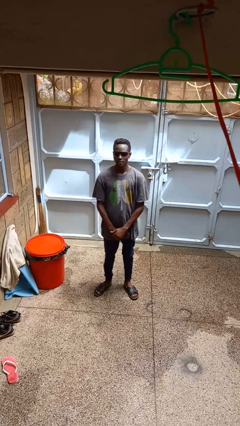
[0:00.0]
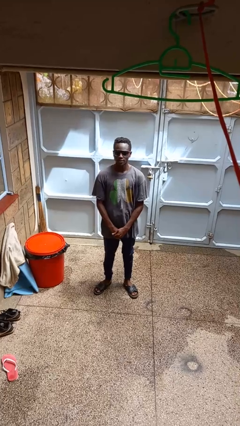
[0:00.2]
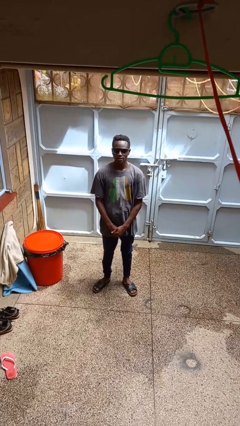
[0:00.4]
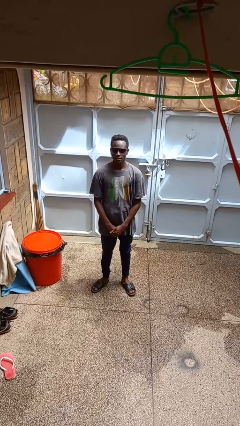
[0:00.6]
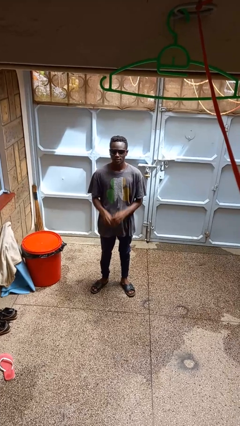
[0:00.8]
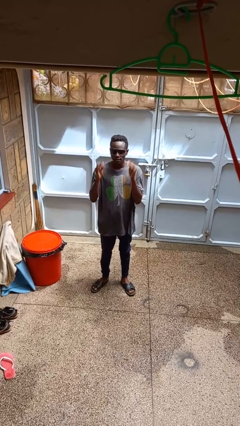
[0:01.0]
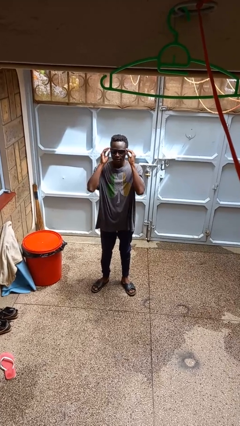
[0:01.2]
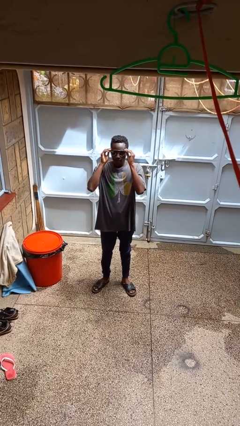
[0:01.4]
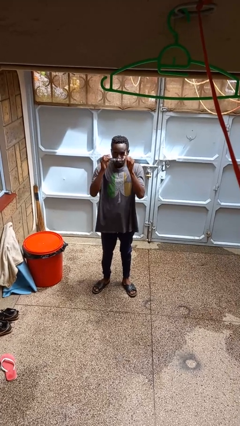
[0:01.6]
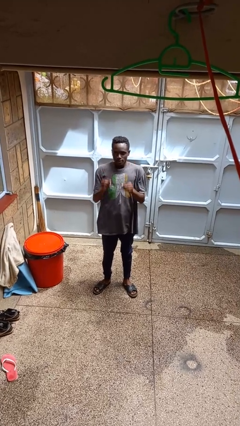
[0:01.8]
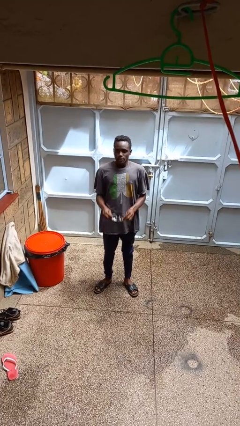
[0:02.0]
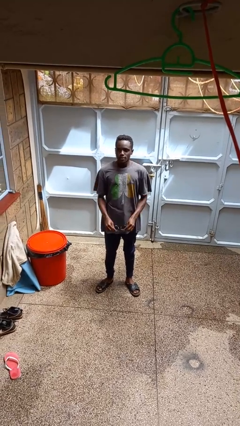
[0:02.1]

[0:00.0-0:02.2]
person takes off sunglasses

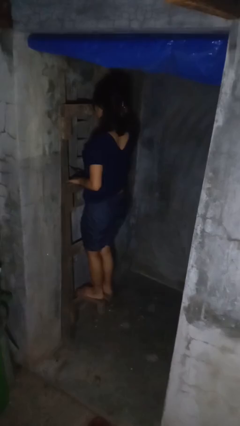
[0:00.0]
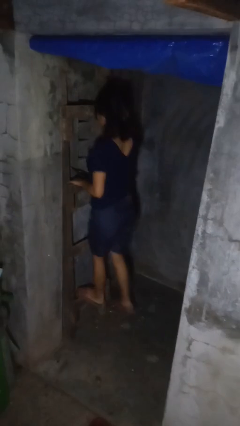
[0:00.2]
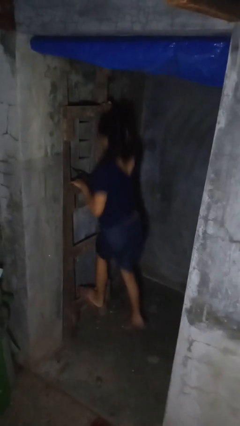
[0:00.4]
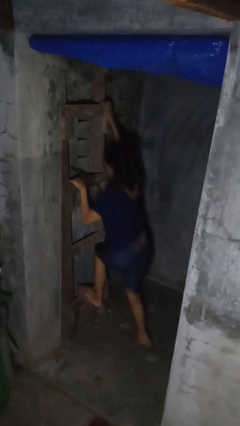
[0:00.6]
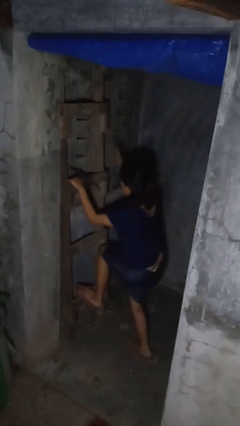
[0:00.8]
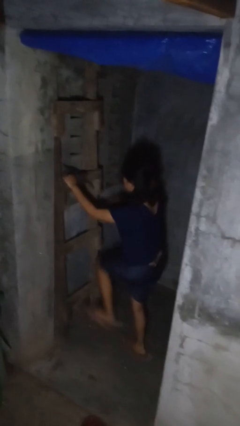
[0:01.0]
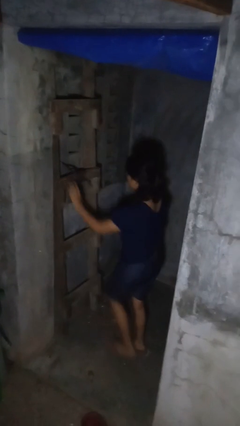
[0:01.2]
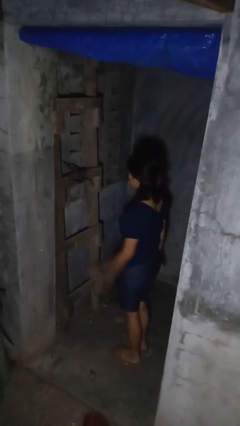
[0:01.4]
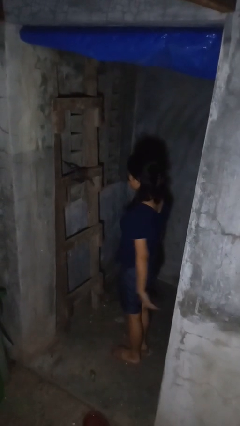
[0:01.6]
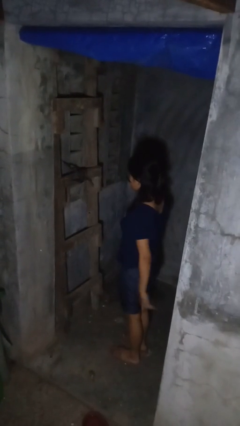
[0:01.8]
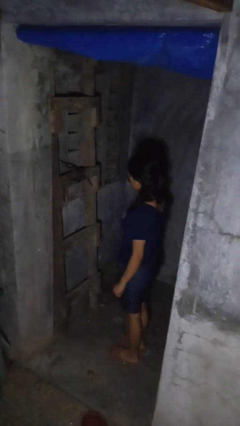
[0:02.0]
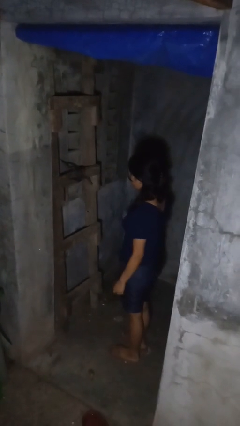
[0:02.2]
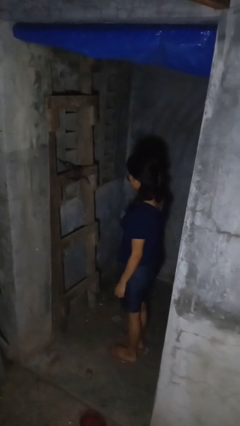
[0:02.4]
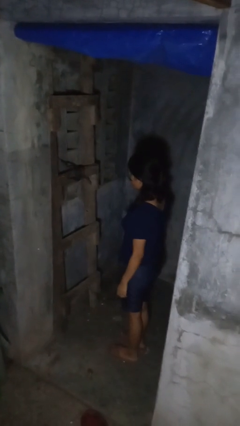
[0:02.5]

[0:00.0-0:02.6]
person climbs down ladder

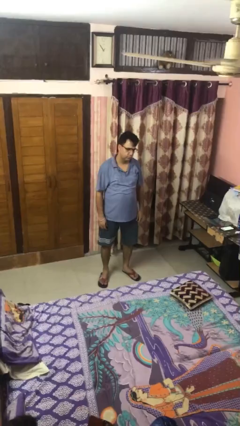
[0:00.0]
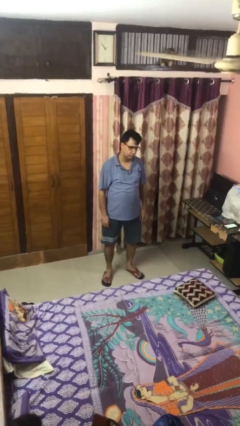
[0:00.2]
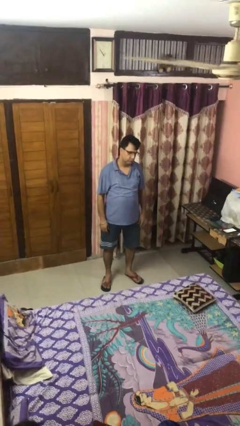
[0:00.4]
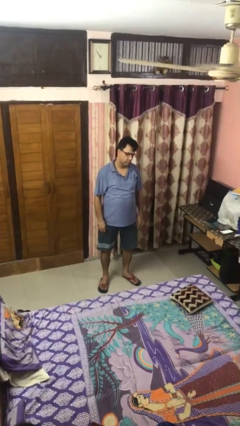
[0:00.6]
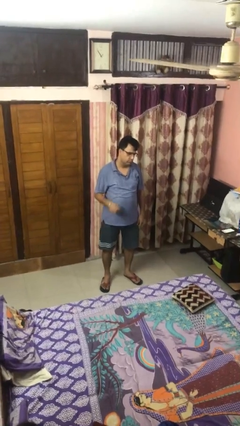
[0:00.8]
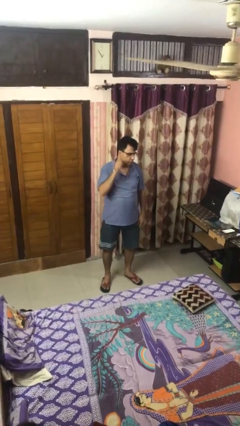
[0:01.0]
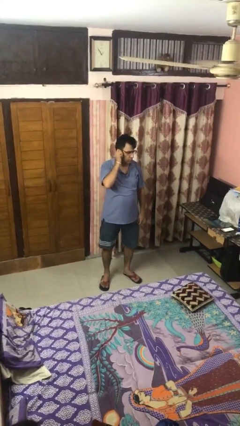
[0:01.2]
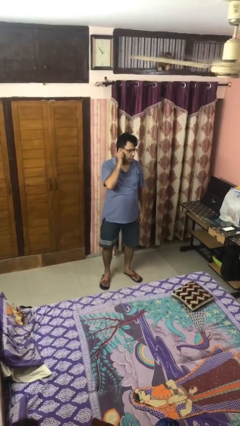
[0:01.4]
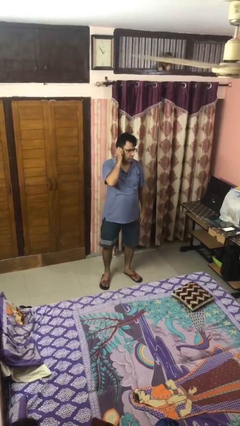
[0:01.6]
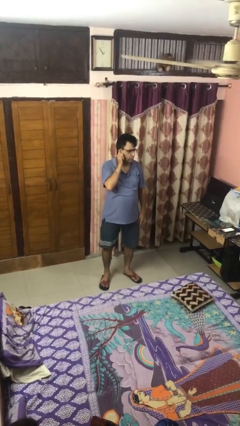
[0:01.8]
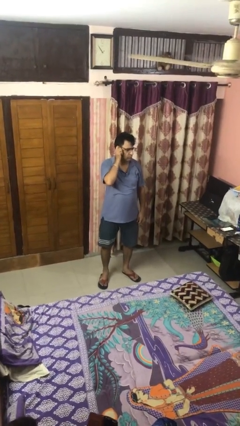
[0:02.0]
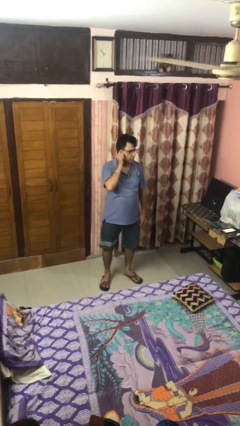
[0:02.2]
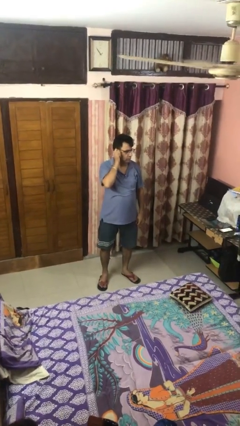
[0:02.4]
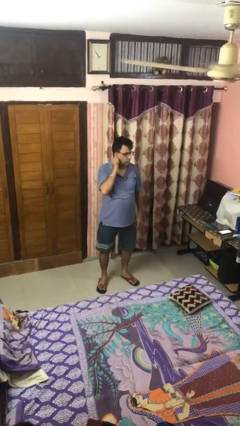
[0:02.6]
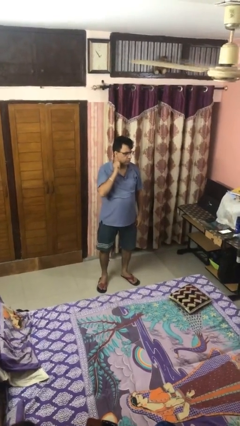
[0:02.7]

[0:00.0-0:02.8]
person touches earlobe

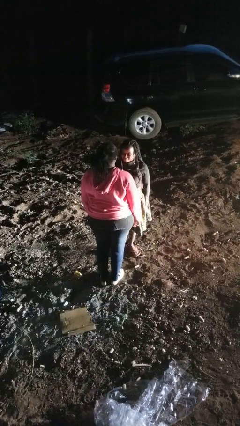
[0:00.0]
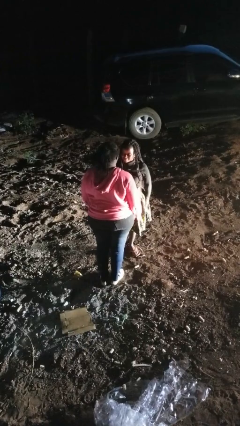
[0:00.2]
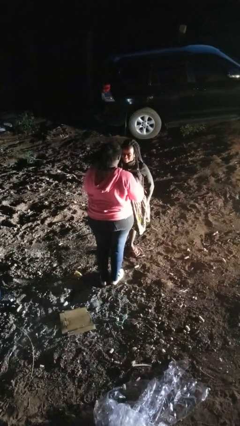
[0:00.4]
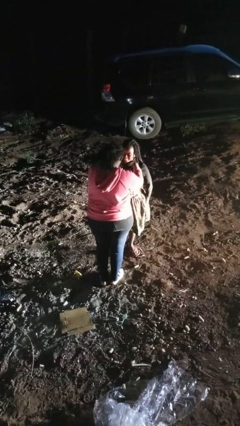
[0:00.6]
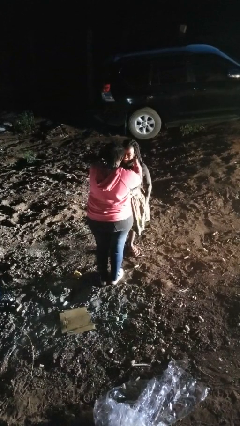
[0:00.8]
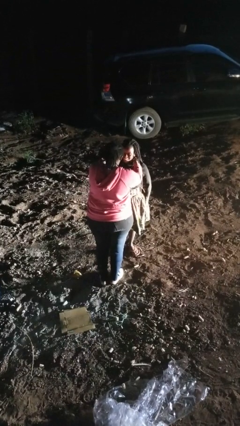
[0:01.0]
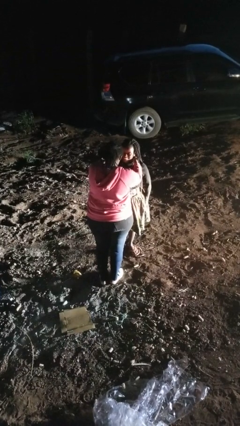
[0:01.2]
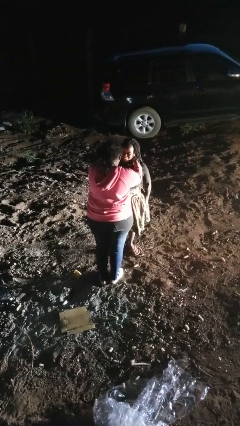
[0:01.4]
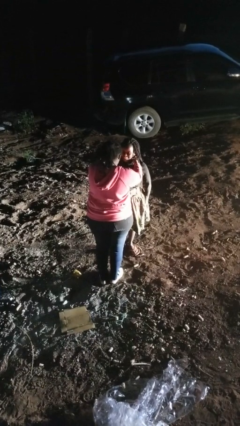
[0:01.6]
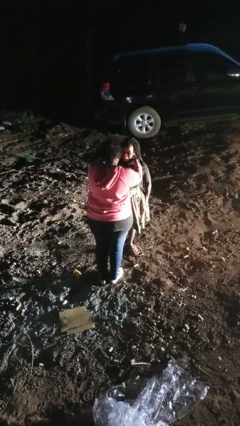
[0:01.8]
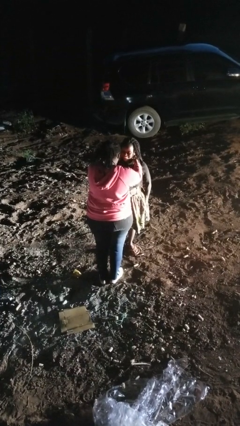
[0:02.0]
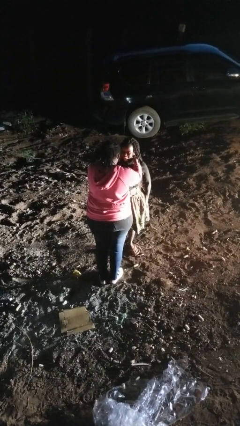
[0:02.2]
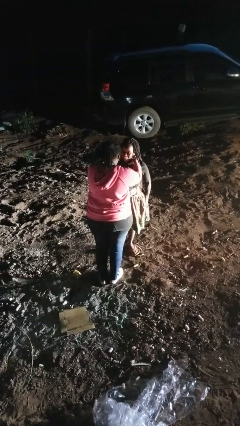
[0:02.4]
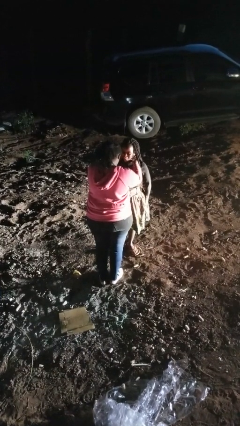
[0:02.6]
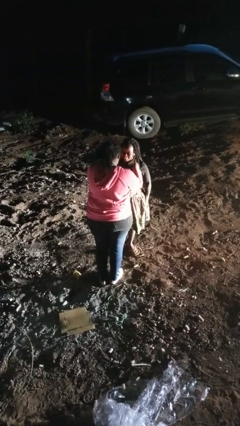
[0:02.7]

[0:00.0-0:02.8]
person tickles person

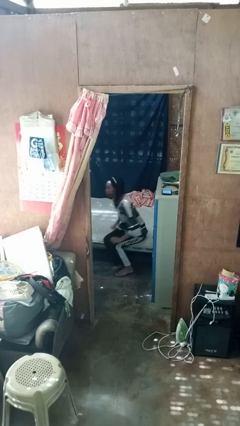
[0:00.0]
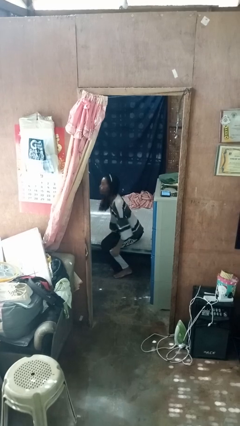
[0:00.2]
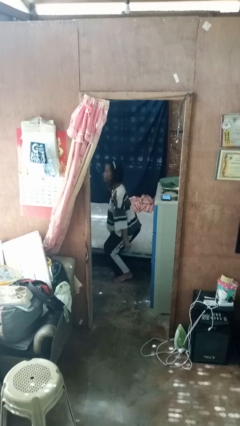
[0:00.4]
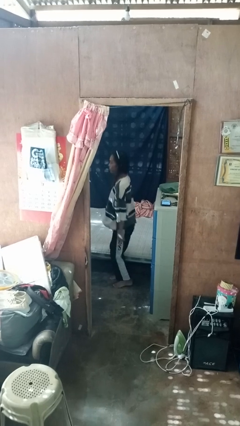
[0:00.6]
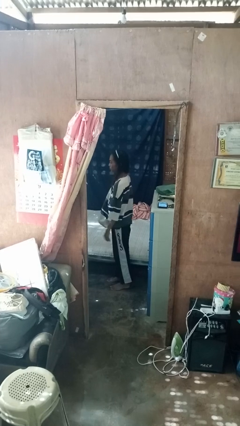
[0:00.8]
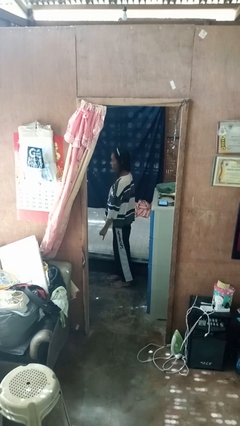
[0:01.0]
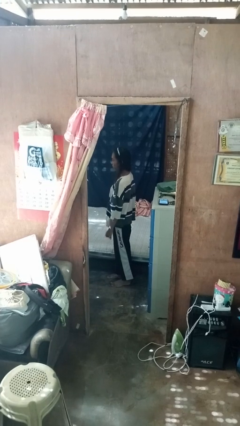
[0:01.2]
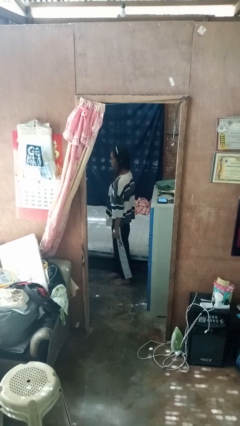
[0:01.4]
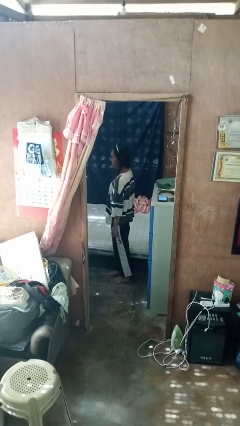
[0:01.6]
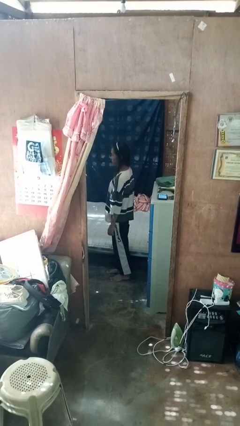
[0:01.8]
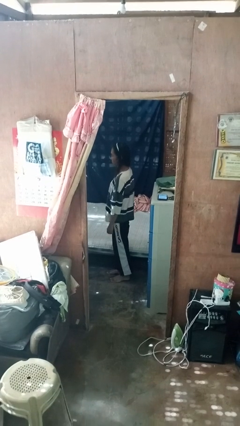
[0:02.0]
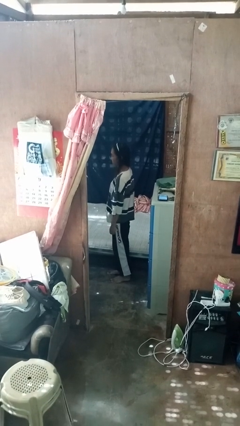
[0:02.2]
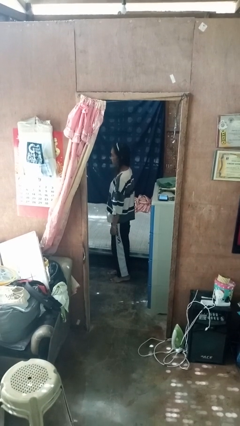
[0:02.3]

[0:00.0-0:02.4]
person stands up

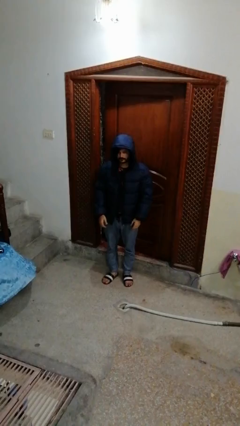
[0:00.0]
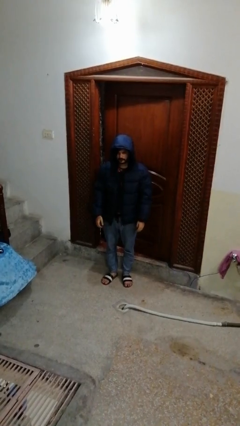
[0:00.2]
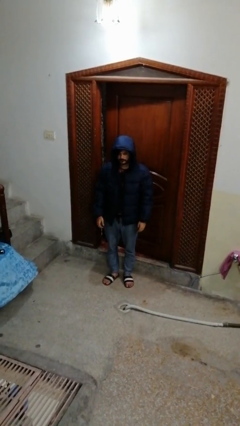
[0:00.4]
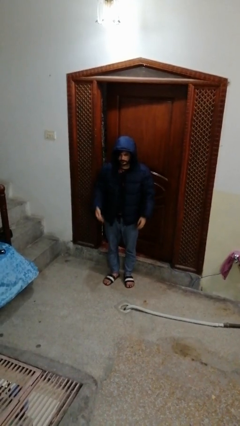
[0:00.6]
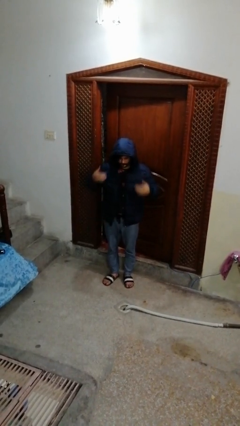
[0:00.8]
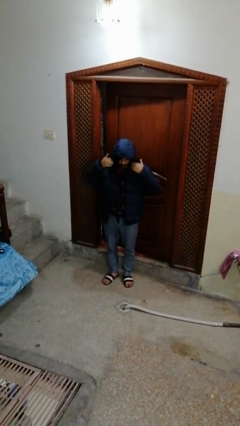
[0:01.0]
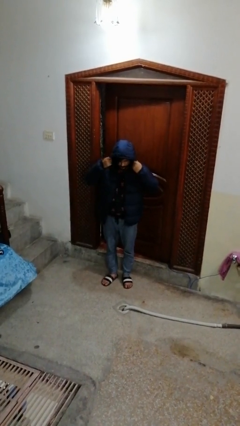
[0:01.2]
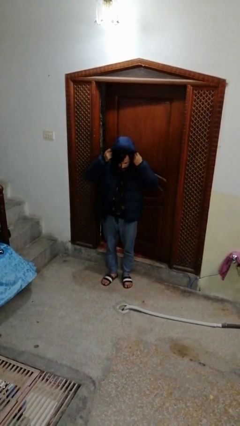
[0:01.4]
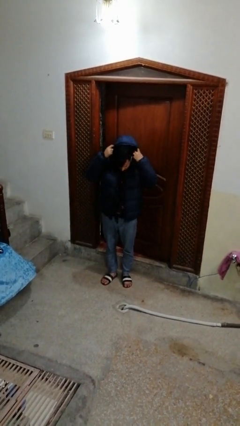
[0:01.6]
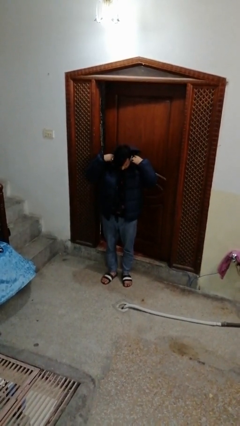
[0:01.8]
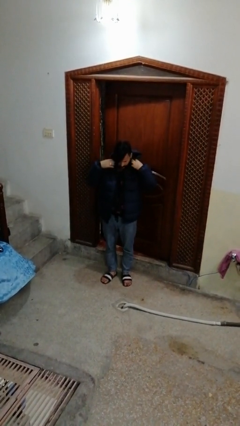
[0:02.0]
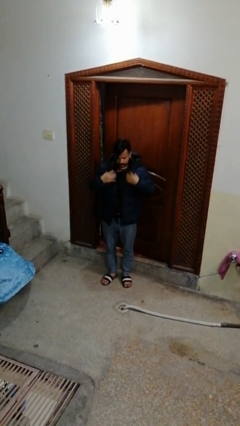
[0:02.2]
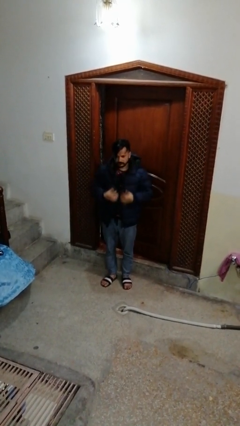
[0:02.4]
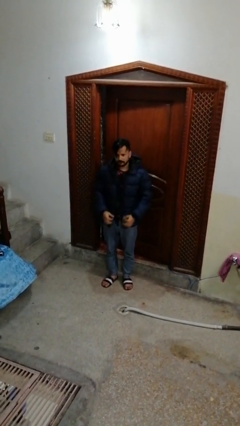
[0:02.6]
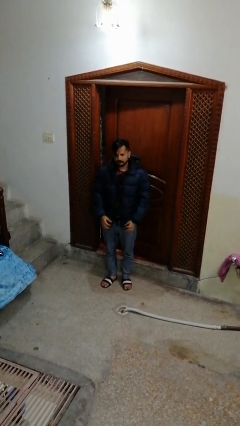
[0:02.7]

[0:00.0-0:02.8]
person takes off hoodie

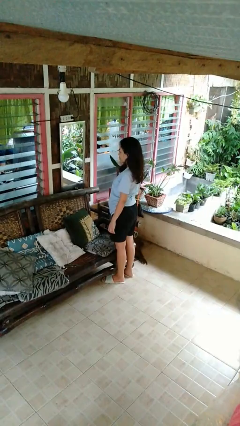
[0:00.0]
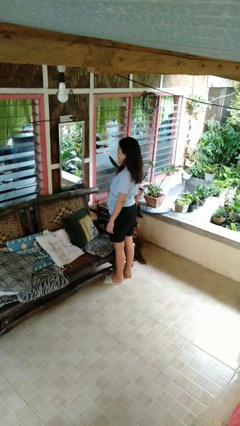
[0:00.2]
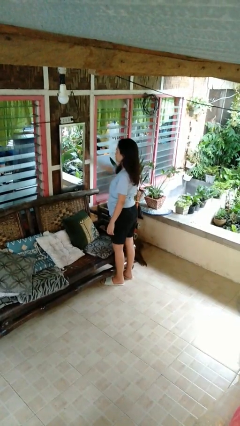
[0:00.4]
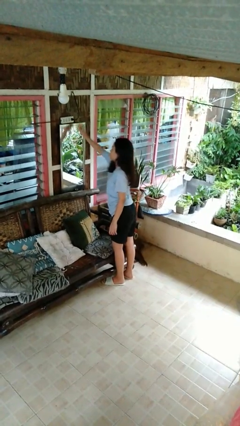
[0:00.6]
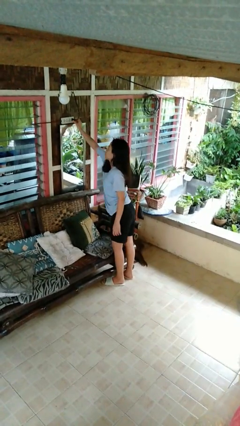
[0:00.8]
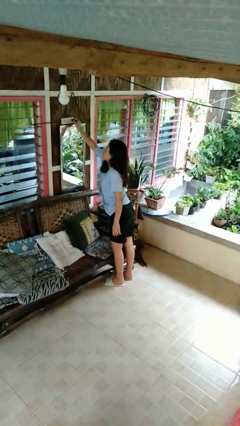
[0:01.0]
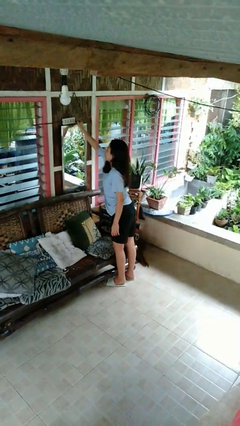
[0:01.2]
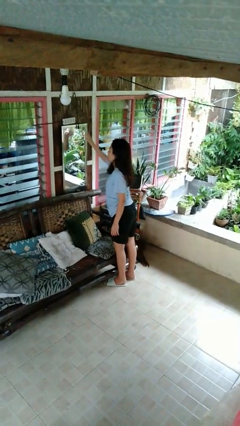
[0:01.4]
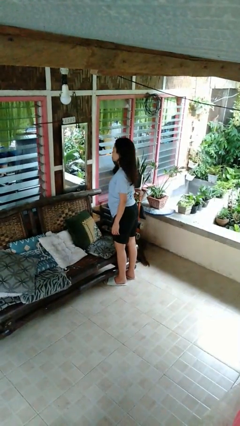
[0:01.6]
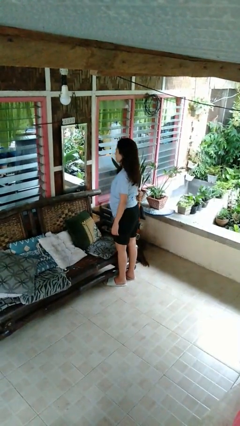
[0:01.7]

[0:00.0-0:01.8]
person unplugs from electrical socket
